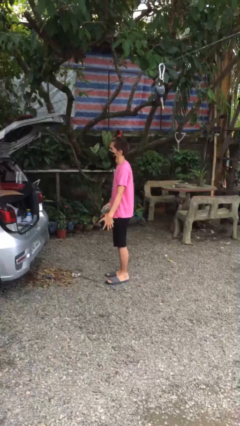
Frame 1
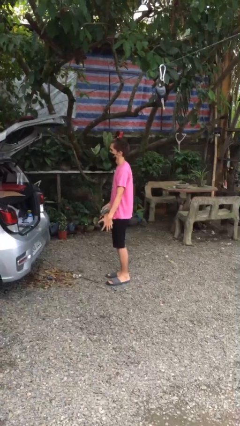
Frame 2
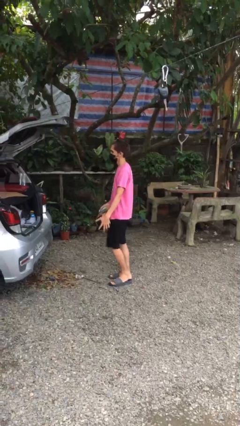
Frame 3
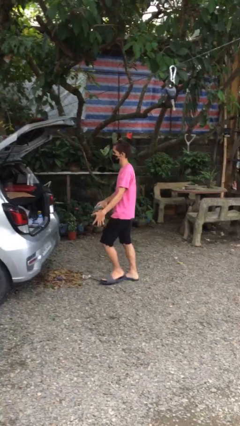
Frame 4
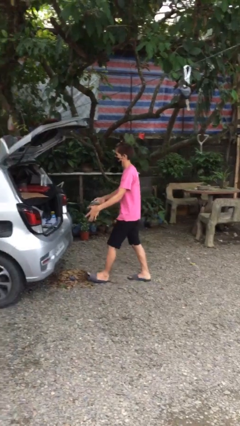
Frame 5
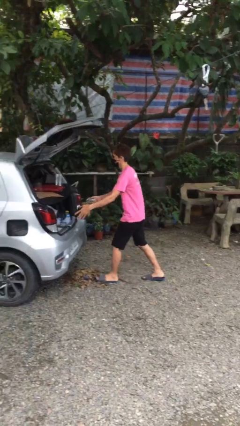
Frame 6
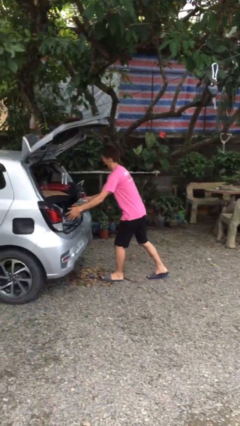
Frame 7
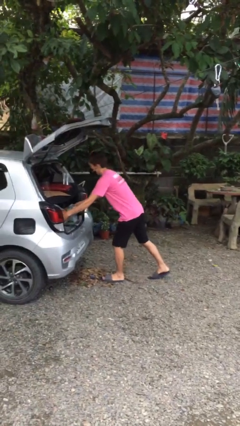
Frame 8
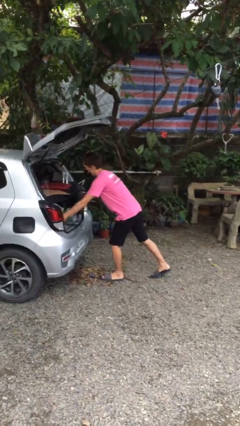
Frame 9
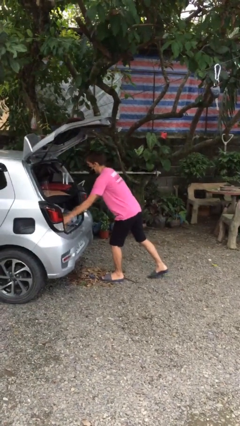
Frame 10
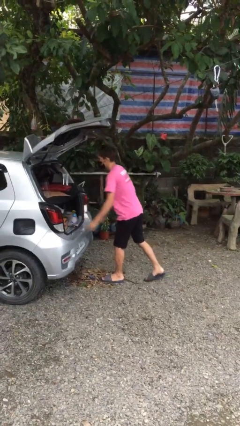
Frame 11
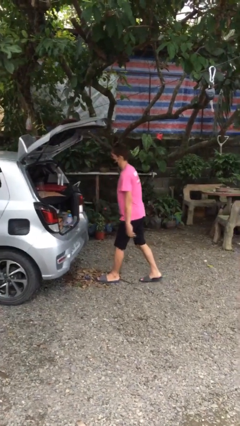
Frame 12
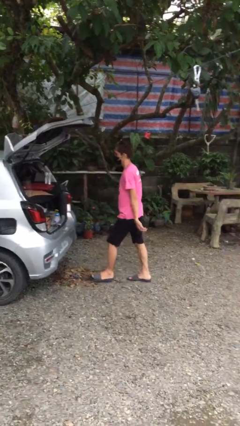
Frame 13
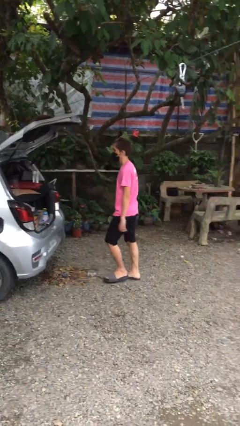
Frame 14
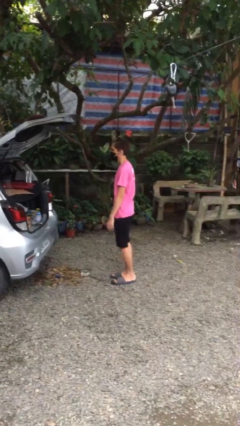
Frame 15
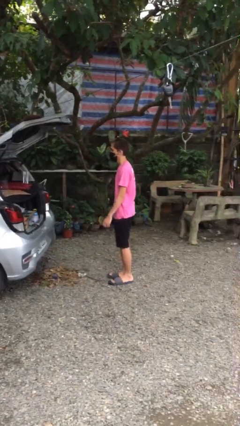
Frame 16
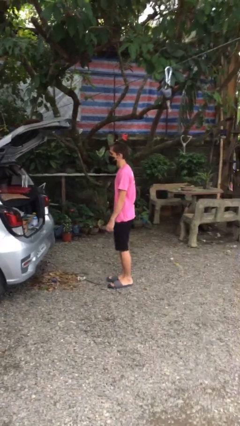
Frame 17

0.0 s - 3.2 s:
person loads car

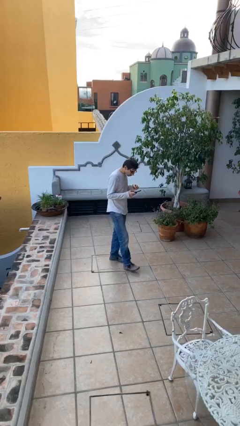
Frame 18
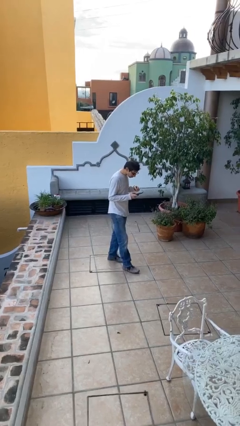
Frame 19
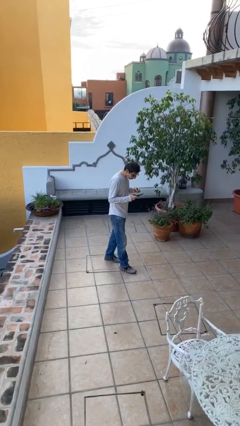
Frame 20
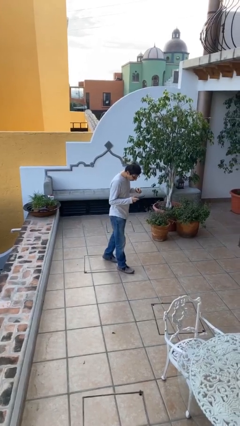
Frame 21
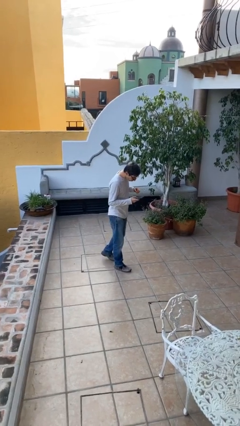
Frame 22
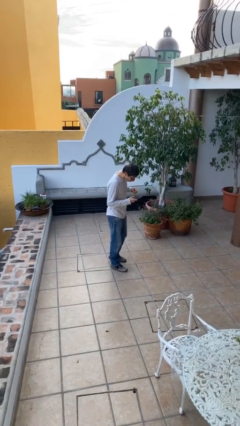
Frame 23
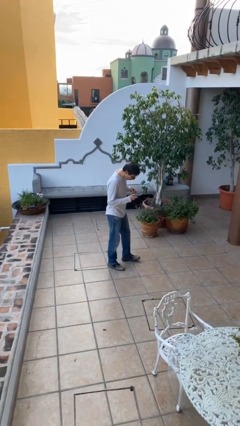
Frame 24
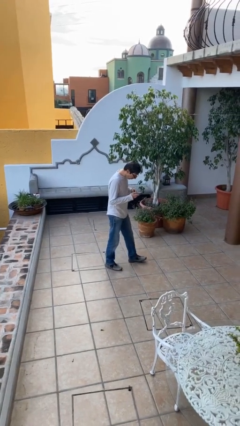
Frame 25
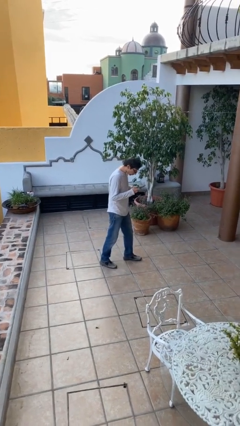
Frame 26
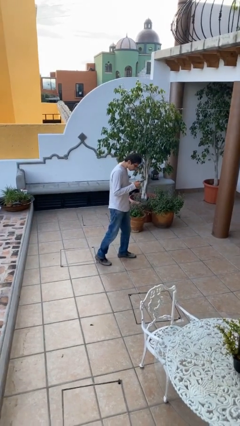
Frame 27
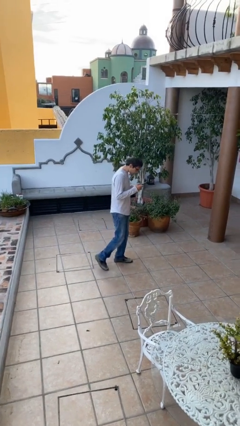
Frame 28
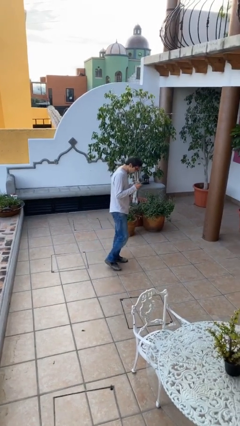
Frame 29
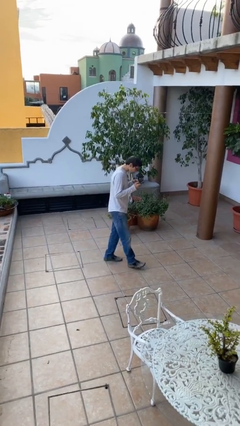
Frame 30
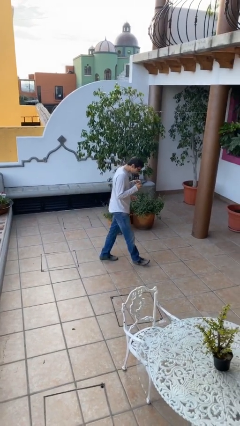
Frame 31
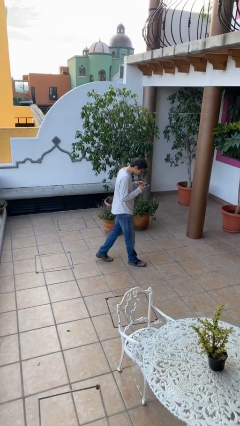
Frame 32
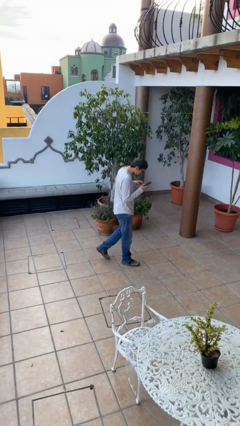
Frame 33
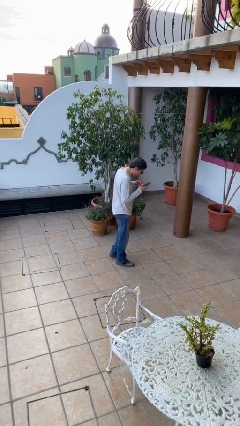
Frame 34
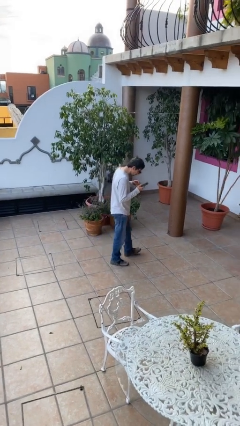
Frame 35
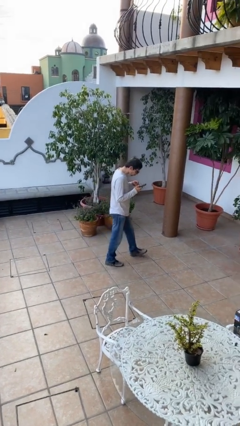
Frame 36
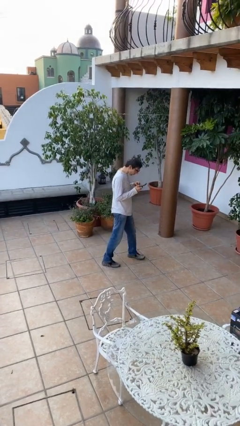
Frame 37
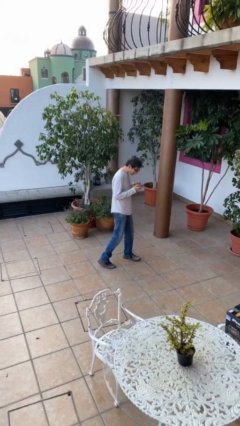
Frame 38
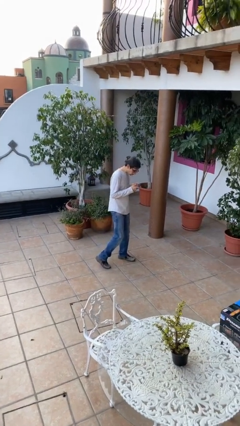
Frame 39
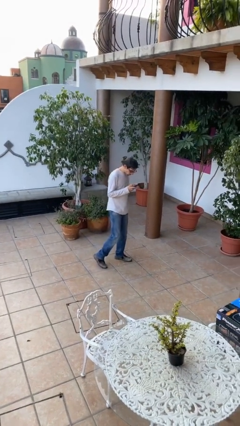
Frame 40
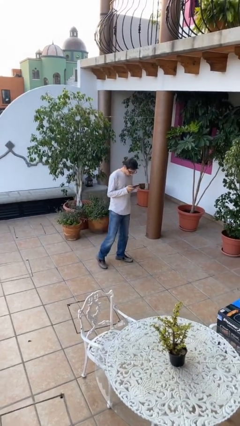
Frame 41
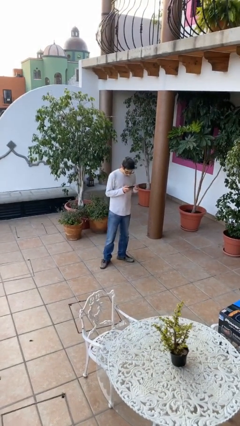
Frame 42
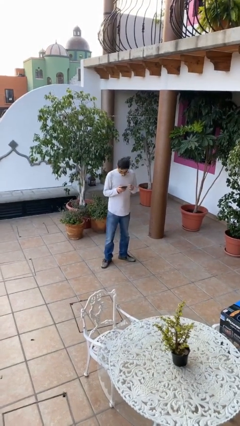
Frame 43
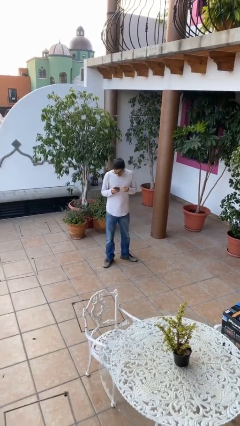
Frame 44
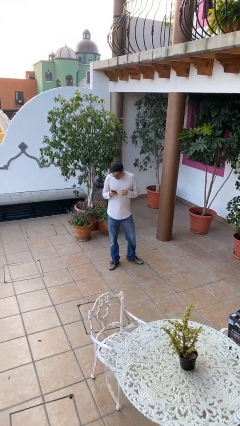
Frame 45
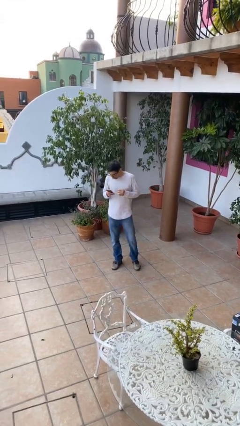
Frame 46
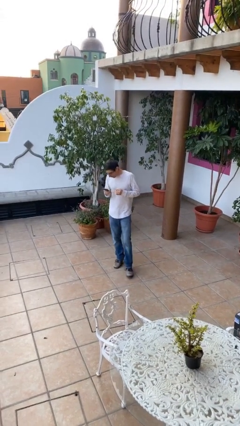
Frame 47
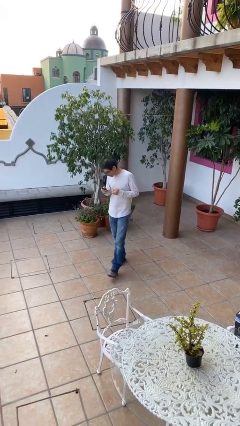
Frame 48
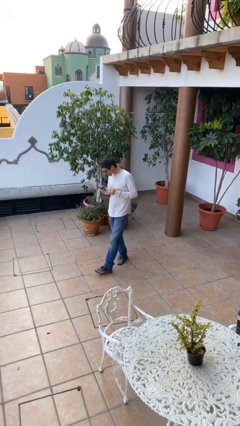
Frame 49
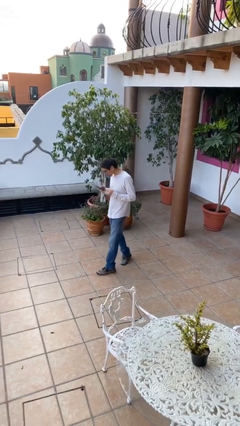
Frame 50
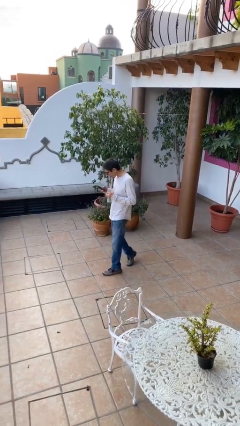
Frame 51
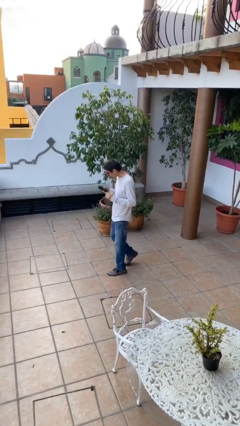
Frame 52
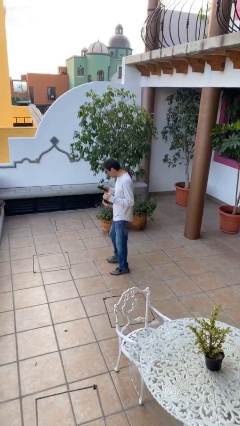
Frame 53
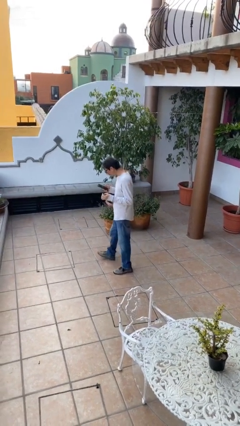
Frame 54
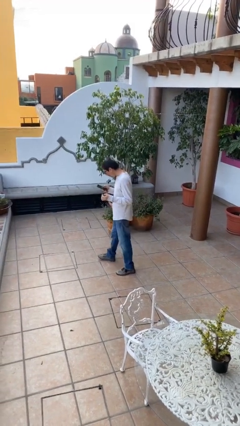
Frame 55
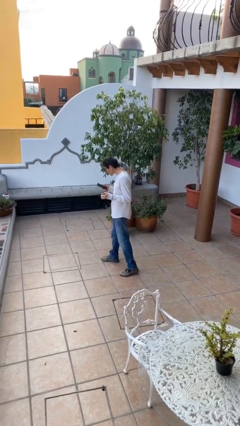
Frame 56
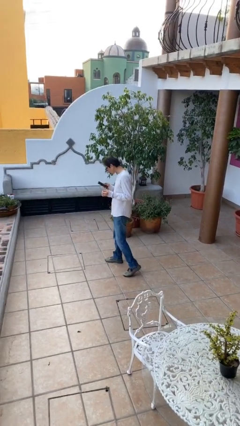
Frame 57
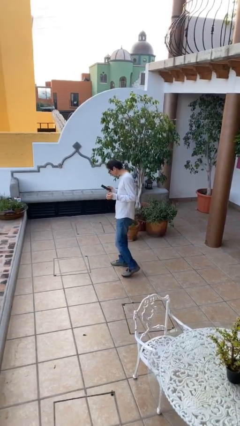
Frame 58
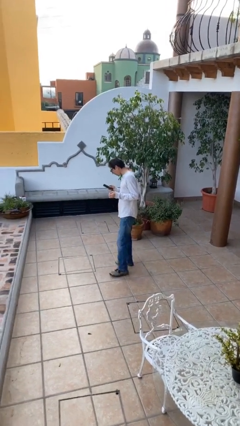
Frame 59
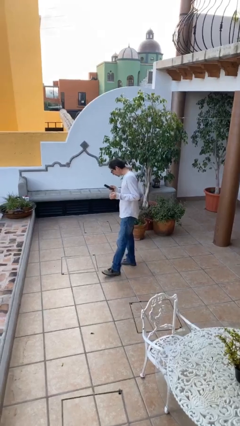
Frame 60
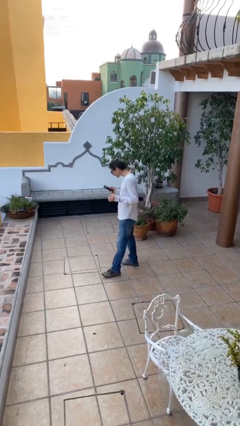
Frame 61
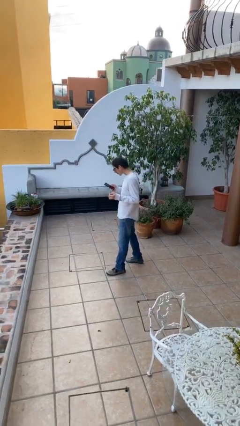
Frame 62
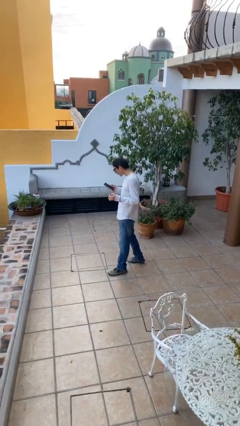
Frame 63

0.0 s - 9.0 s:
person texts on phone

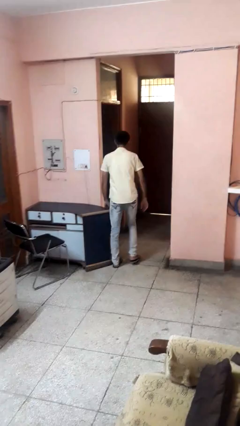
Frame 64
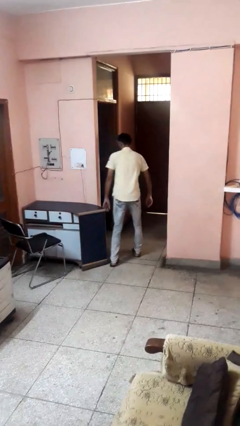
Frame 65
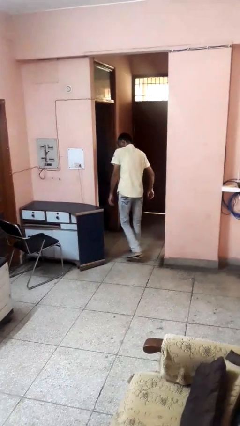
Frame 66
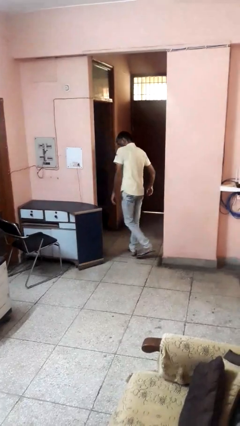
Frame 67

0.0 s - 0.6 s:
person bumps into table

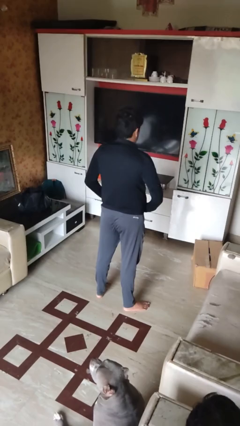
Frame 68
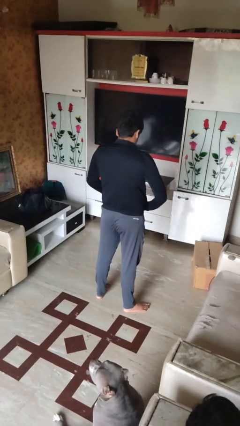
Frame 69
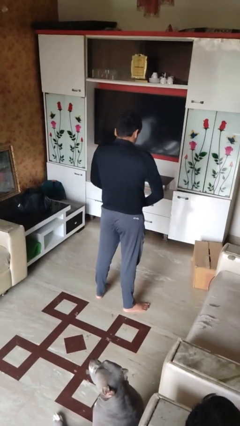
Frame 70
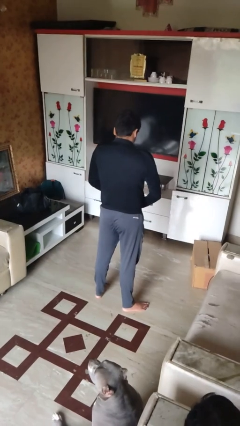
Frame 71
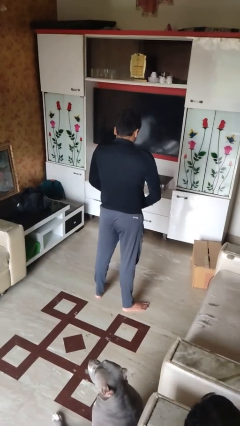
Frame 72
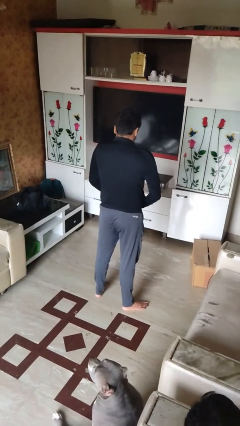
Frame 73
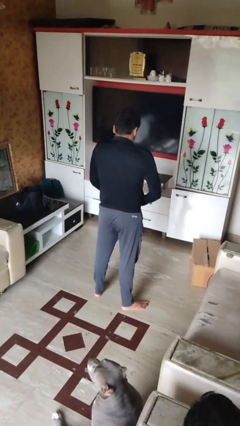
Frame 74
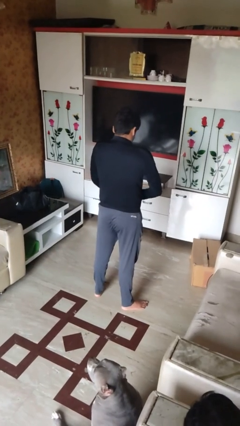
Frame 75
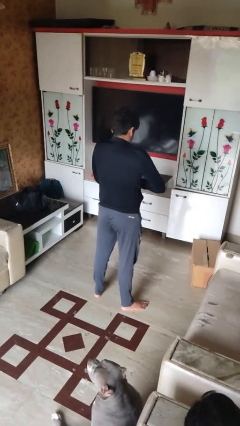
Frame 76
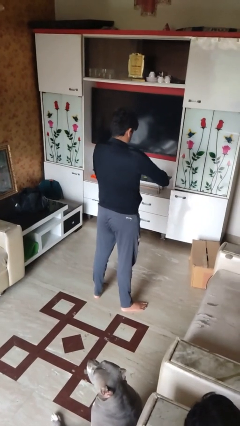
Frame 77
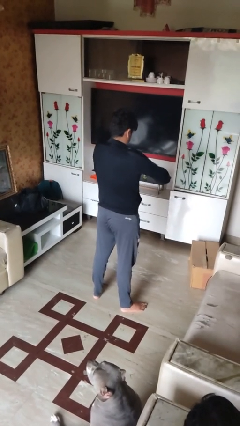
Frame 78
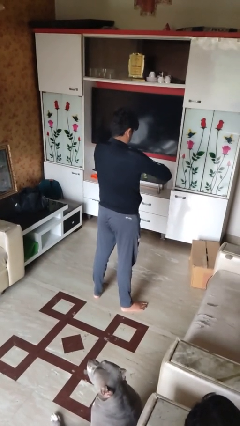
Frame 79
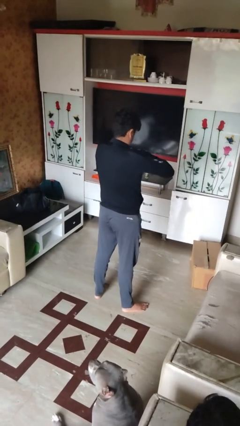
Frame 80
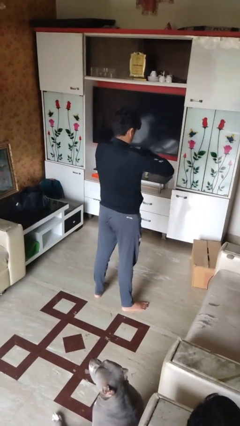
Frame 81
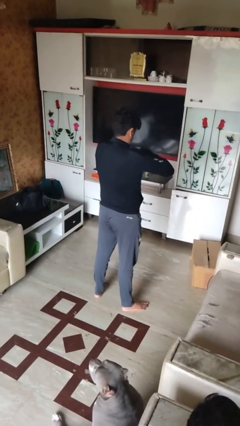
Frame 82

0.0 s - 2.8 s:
person zips up jacket

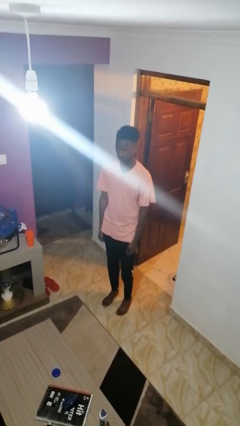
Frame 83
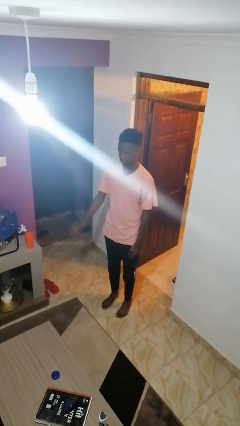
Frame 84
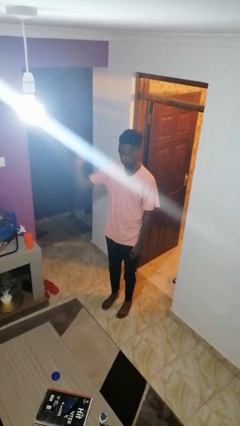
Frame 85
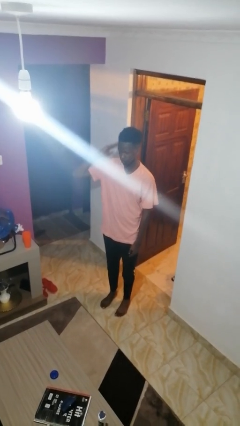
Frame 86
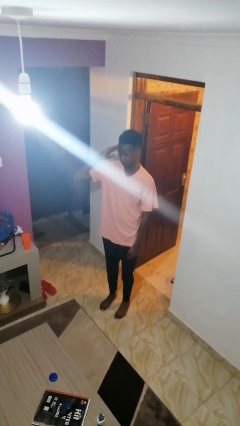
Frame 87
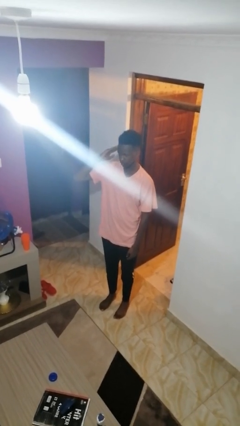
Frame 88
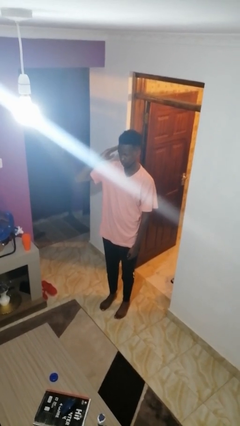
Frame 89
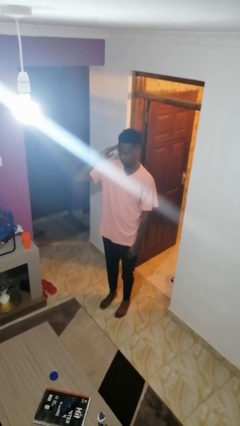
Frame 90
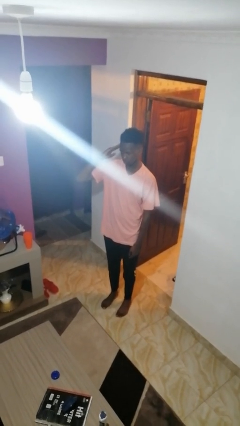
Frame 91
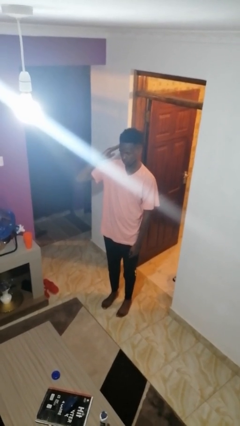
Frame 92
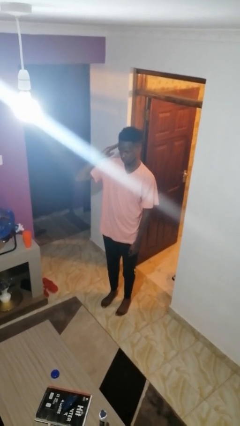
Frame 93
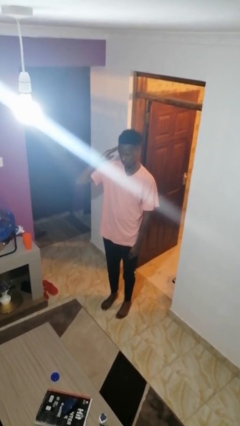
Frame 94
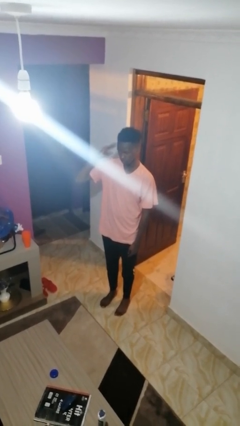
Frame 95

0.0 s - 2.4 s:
person salutes
